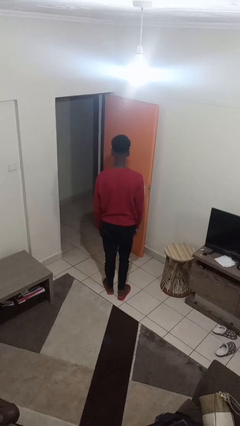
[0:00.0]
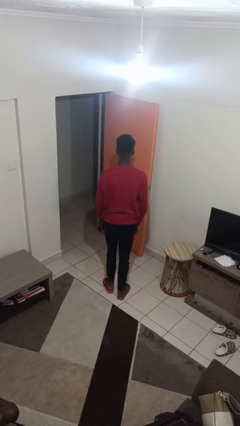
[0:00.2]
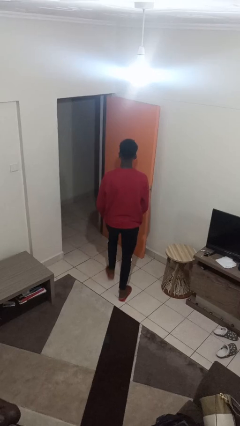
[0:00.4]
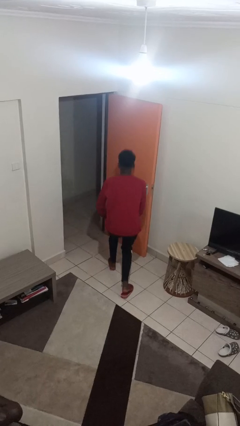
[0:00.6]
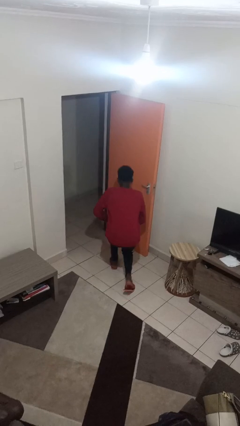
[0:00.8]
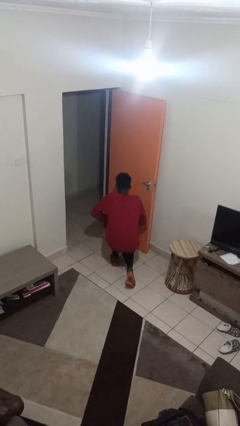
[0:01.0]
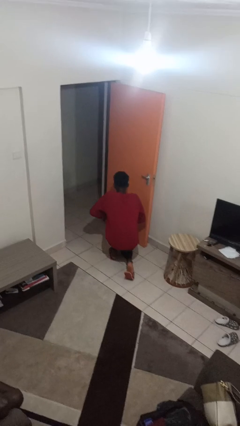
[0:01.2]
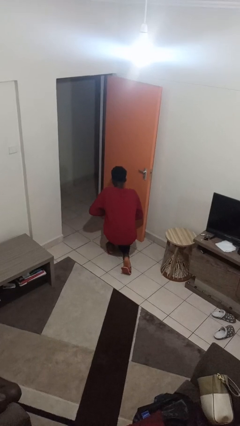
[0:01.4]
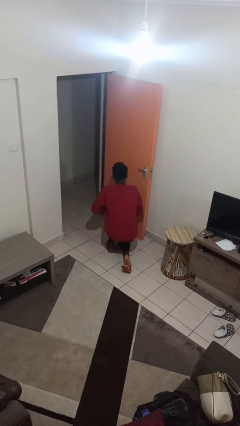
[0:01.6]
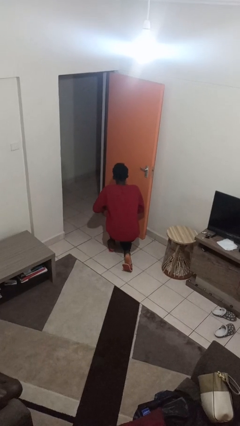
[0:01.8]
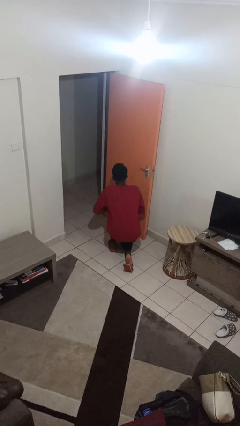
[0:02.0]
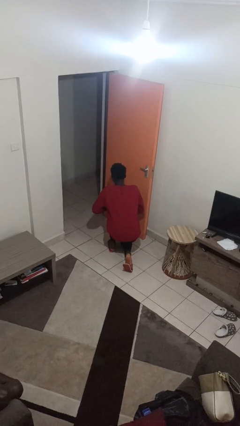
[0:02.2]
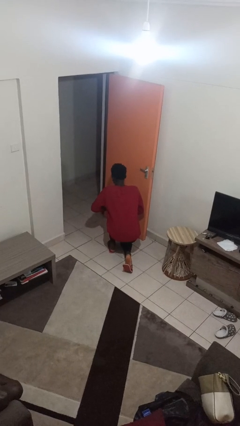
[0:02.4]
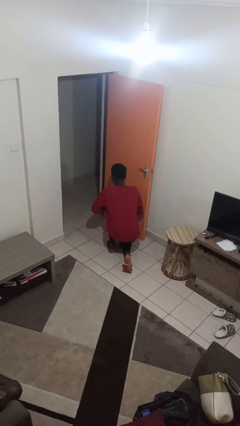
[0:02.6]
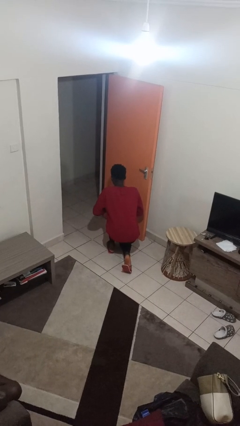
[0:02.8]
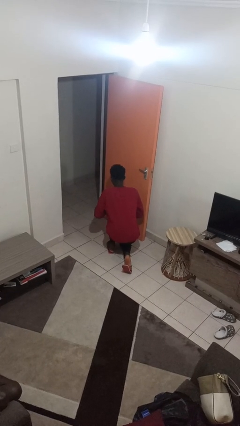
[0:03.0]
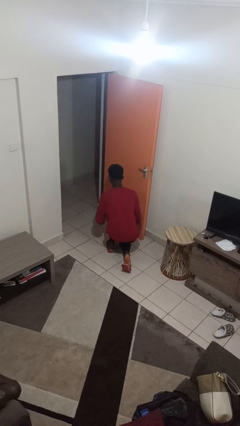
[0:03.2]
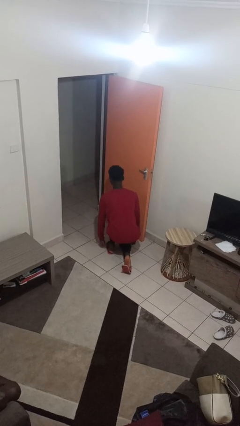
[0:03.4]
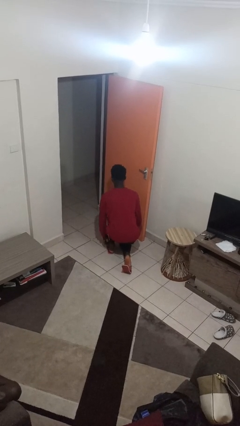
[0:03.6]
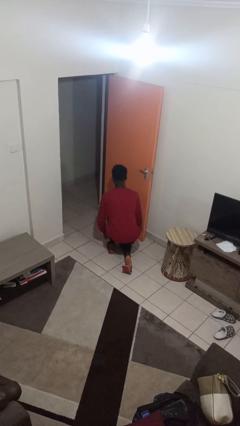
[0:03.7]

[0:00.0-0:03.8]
person kneels

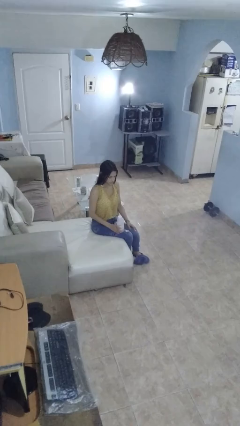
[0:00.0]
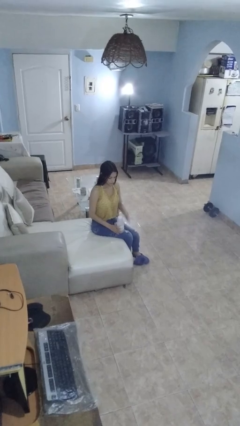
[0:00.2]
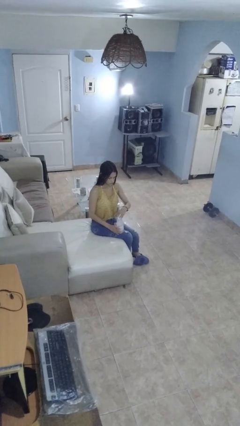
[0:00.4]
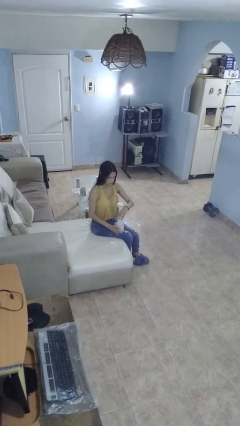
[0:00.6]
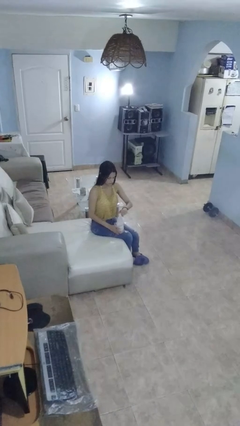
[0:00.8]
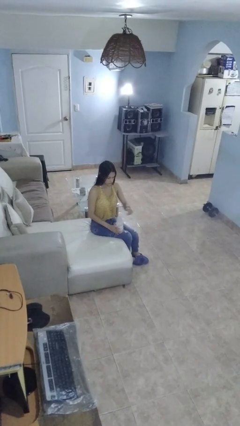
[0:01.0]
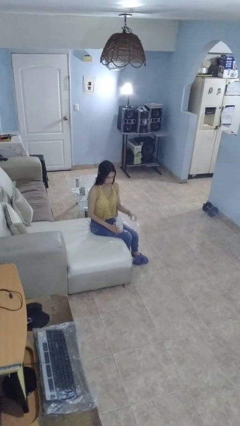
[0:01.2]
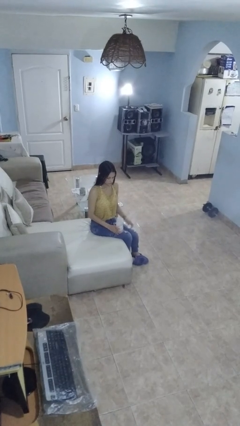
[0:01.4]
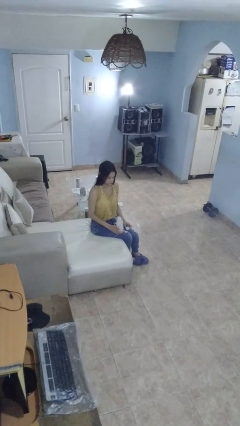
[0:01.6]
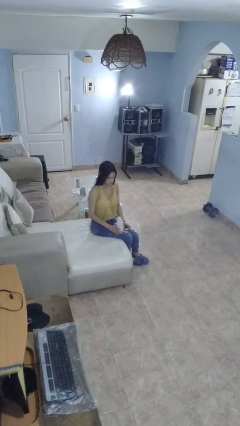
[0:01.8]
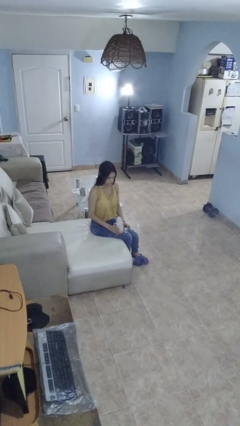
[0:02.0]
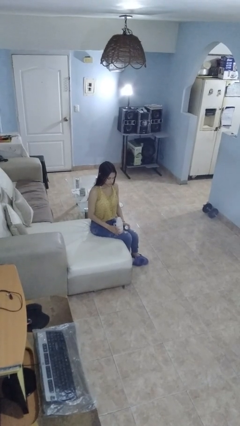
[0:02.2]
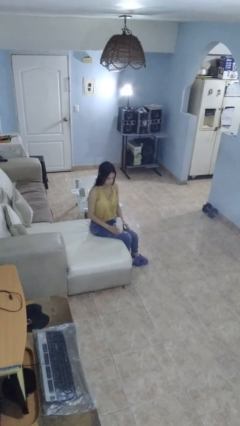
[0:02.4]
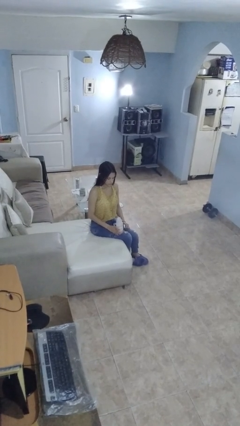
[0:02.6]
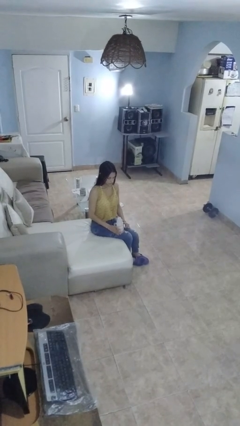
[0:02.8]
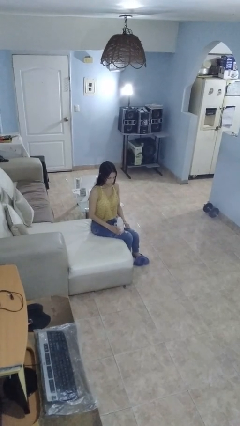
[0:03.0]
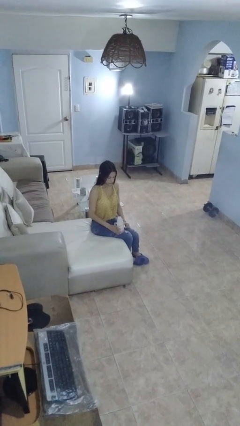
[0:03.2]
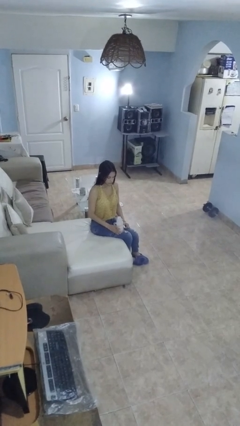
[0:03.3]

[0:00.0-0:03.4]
person unscrews lid from bottle

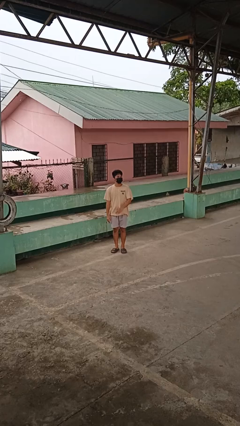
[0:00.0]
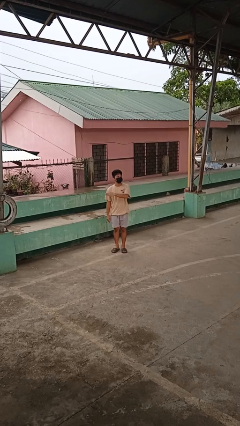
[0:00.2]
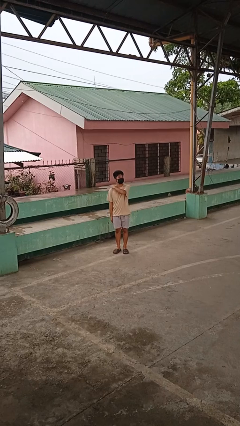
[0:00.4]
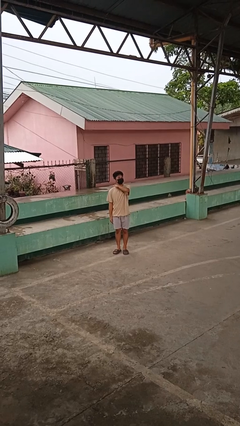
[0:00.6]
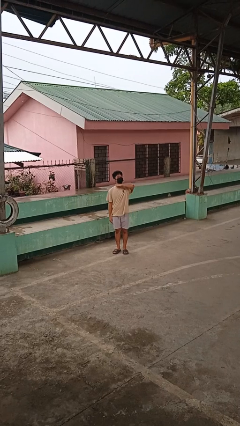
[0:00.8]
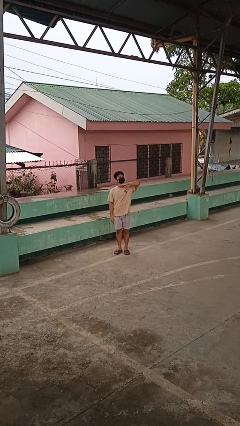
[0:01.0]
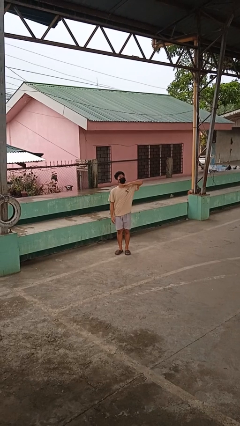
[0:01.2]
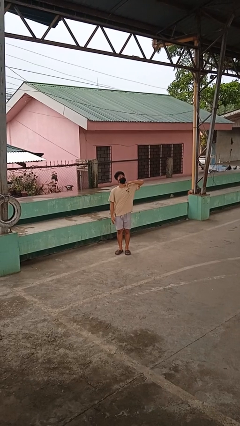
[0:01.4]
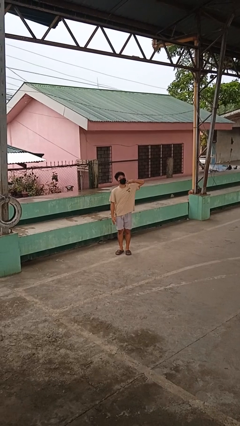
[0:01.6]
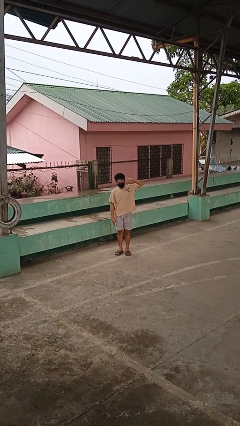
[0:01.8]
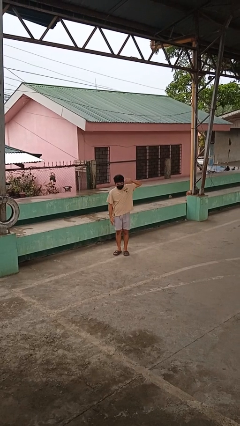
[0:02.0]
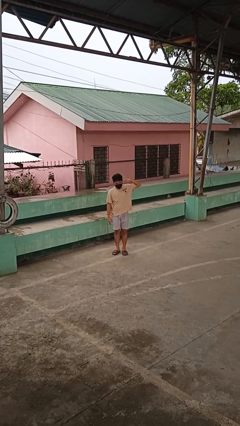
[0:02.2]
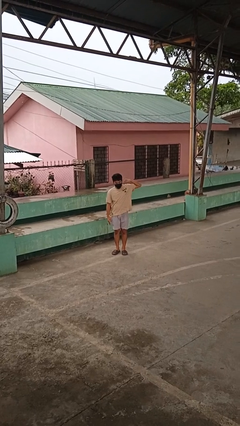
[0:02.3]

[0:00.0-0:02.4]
person gestures cut

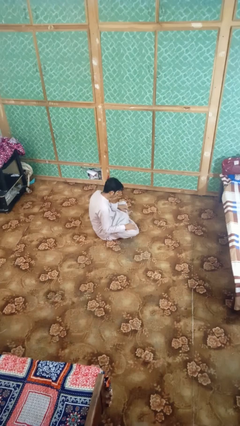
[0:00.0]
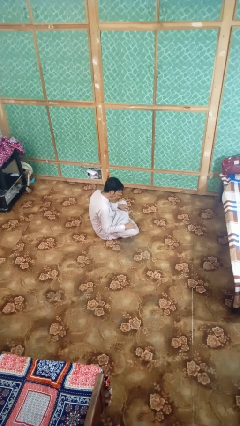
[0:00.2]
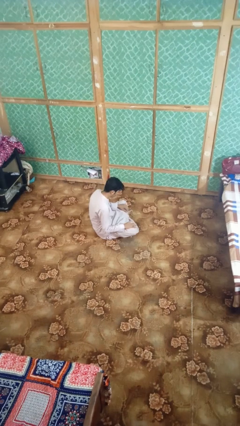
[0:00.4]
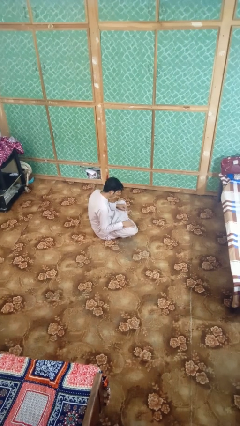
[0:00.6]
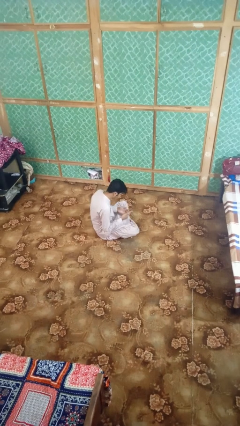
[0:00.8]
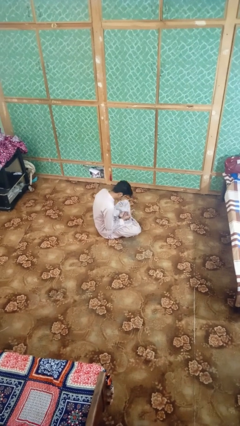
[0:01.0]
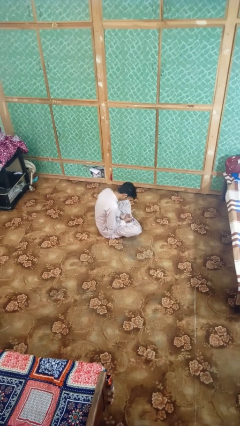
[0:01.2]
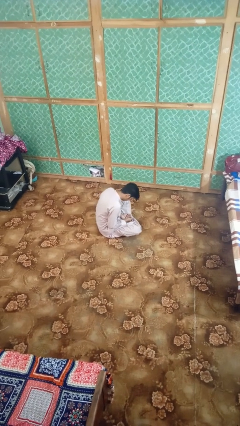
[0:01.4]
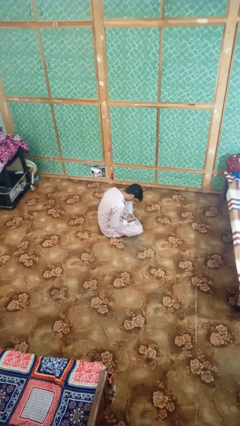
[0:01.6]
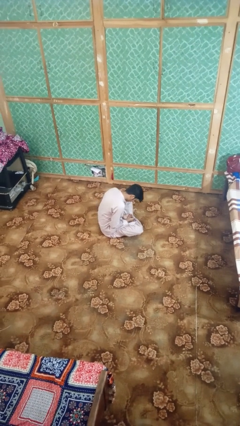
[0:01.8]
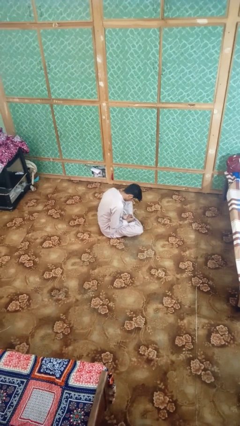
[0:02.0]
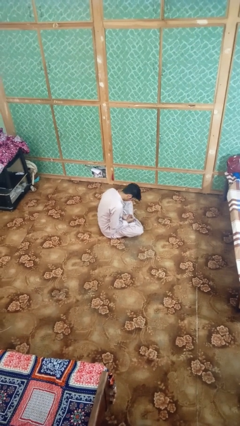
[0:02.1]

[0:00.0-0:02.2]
person looks at hands in lap

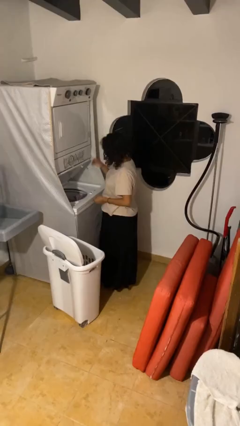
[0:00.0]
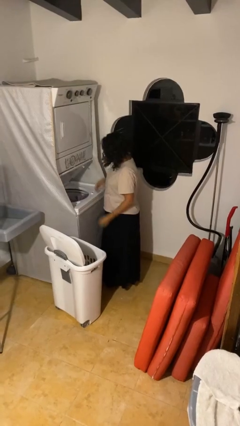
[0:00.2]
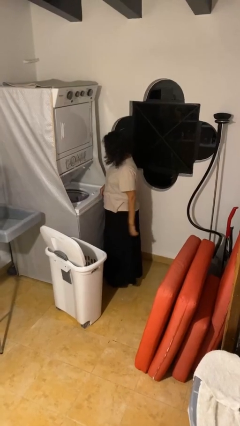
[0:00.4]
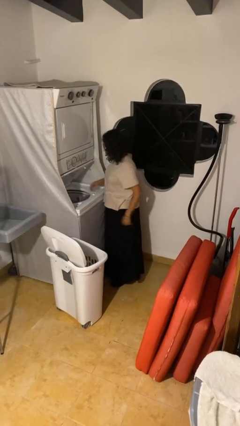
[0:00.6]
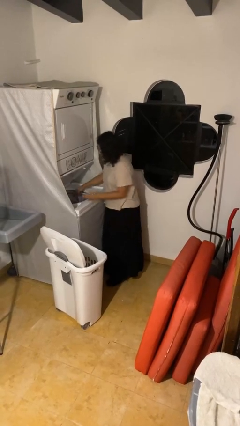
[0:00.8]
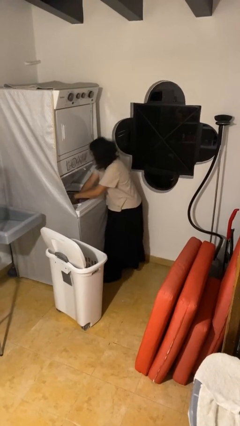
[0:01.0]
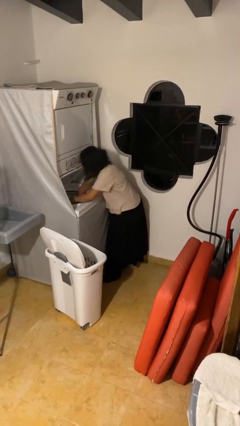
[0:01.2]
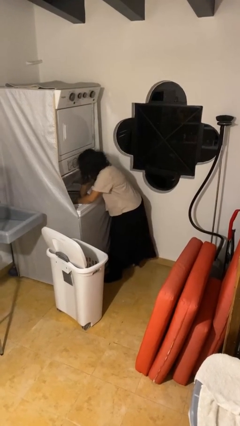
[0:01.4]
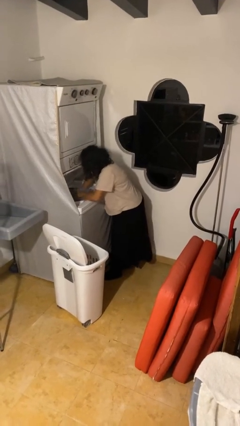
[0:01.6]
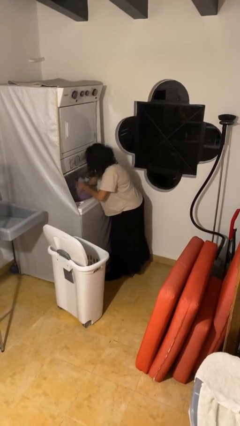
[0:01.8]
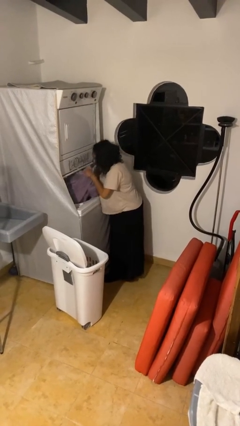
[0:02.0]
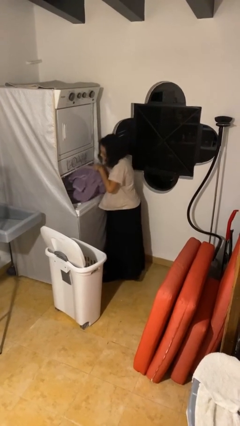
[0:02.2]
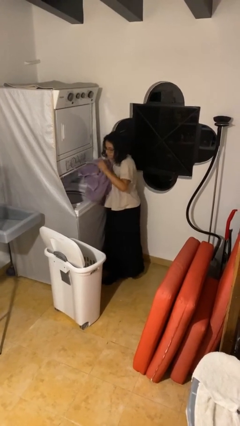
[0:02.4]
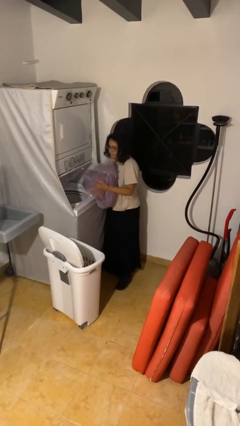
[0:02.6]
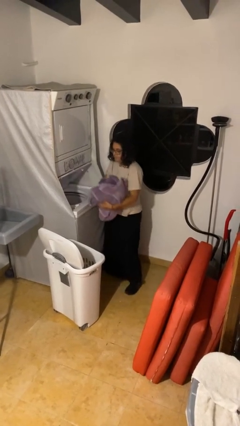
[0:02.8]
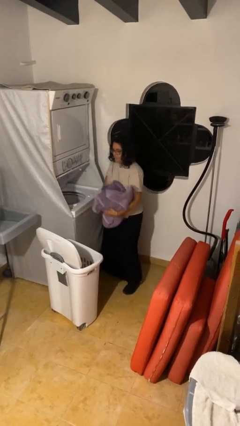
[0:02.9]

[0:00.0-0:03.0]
person unloads clotheswasher

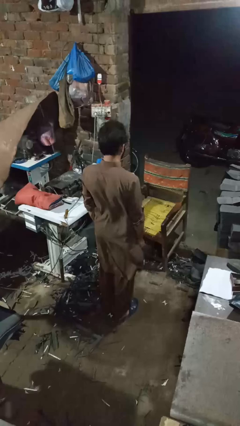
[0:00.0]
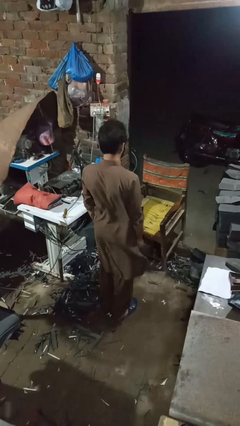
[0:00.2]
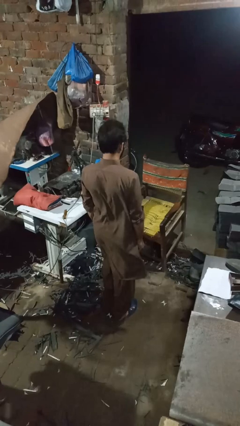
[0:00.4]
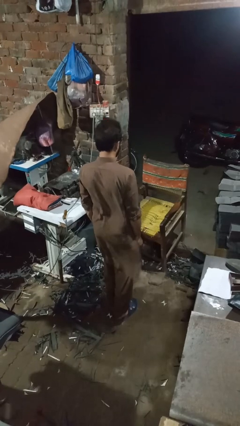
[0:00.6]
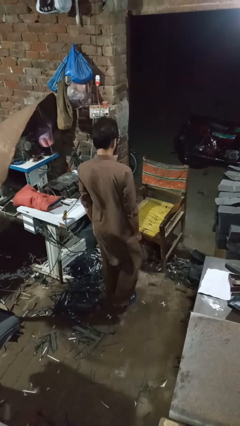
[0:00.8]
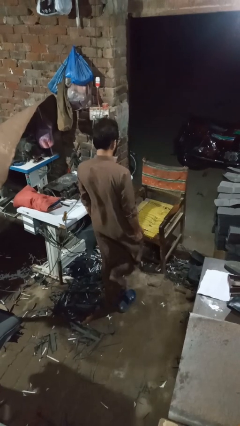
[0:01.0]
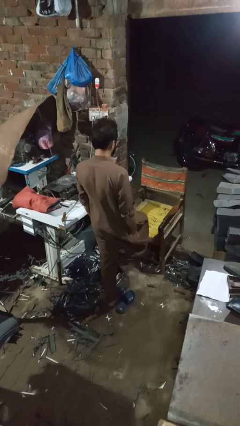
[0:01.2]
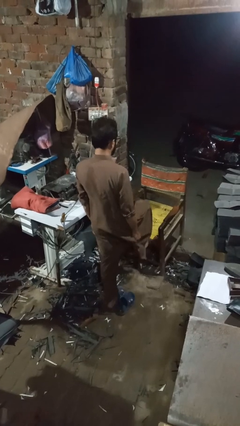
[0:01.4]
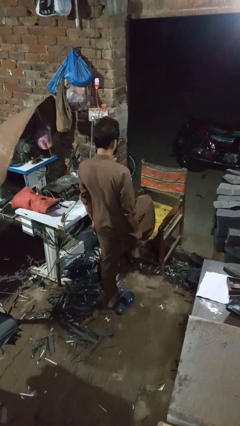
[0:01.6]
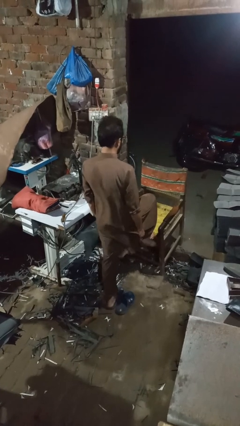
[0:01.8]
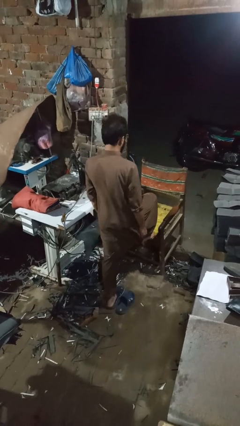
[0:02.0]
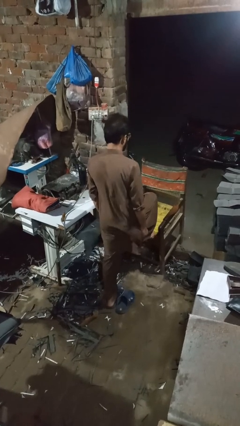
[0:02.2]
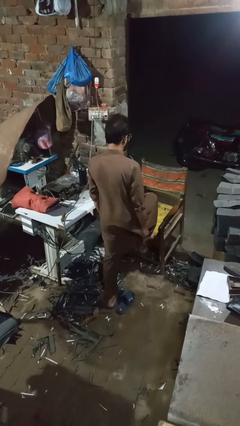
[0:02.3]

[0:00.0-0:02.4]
person stubs toe

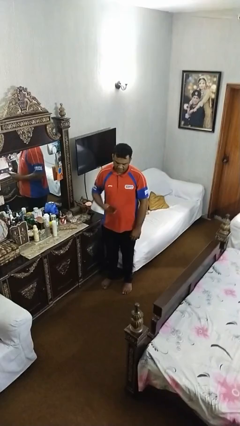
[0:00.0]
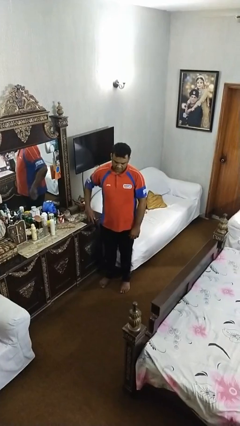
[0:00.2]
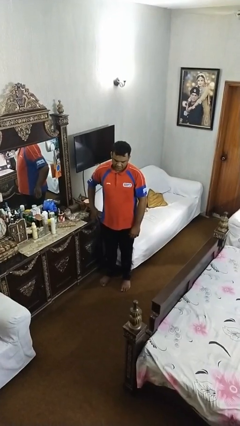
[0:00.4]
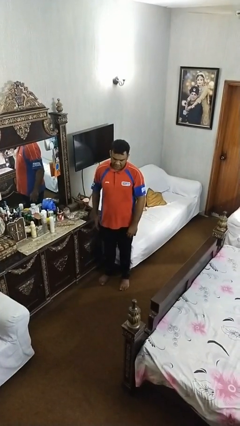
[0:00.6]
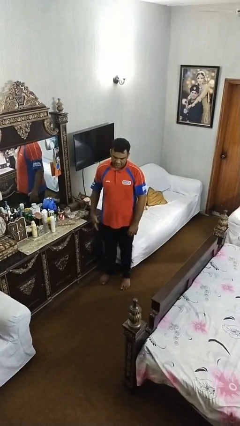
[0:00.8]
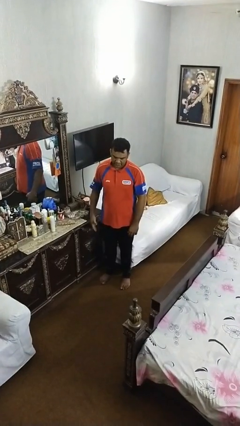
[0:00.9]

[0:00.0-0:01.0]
person puts phone into pocket
